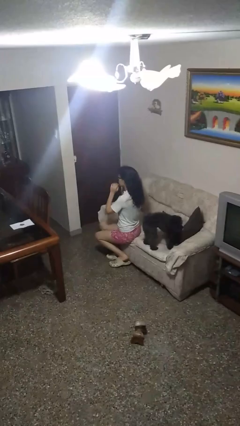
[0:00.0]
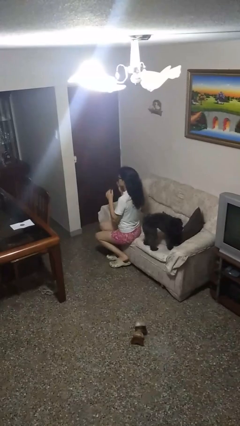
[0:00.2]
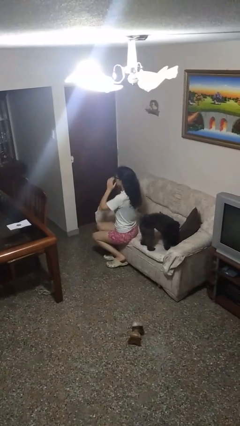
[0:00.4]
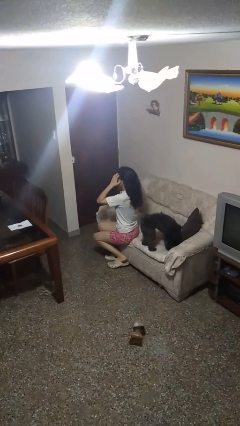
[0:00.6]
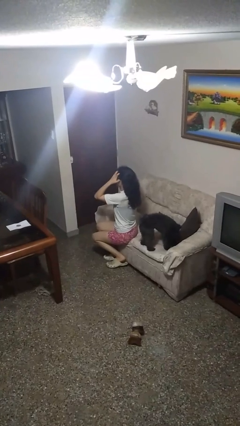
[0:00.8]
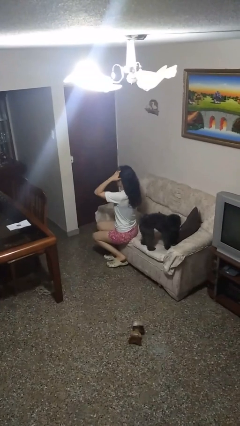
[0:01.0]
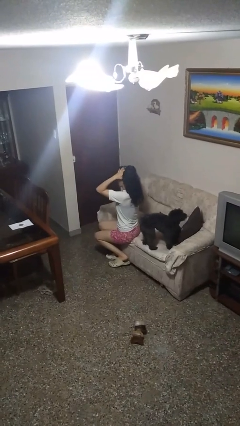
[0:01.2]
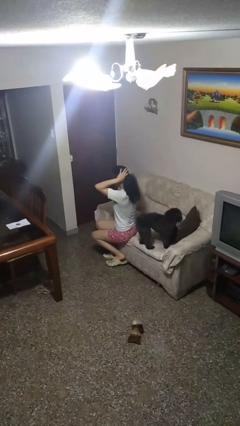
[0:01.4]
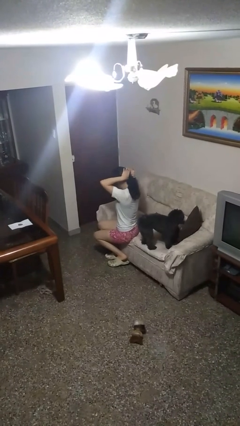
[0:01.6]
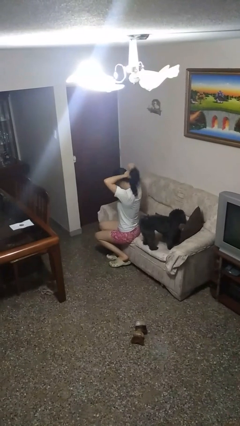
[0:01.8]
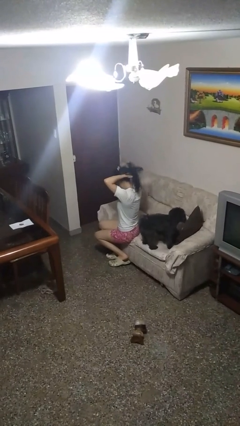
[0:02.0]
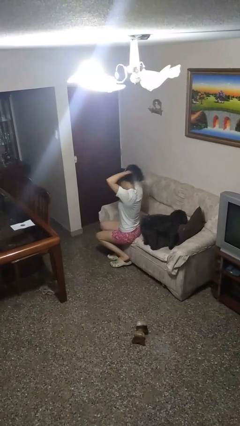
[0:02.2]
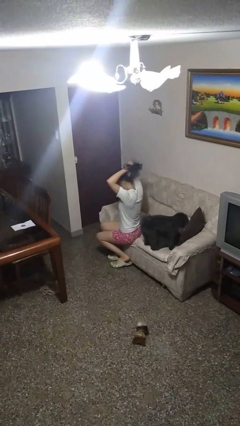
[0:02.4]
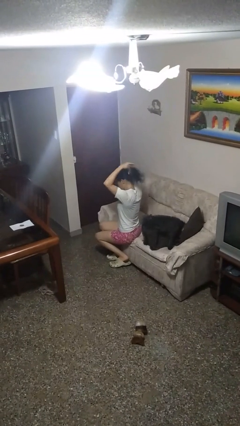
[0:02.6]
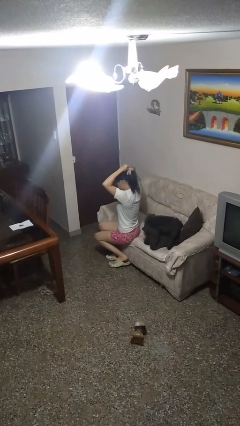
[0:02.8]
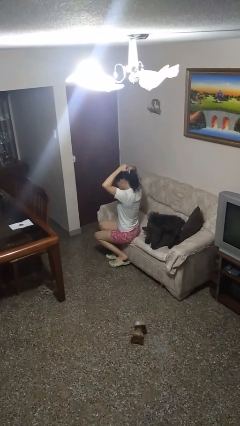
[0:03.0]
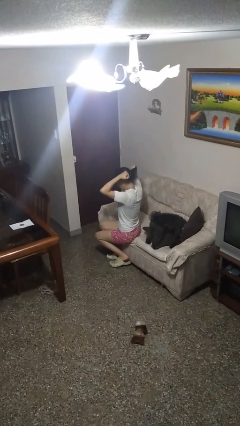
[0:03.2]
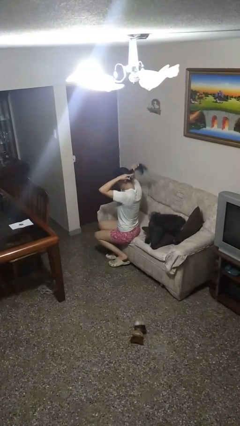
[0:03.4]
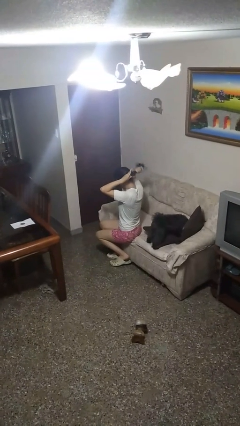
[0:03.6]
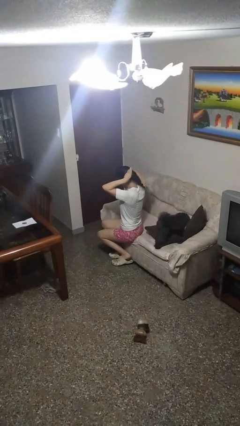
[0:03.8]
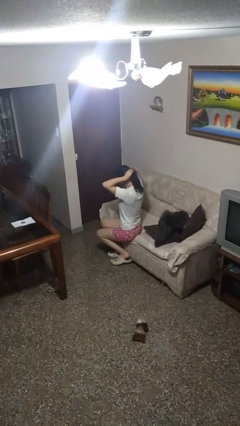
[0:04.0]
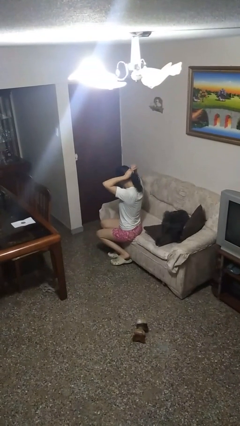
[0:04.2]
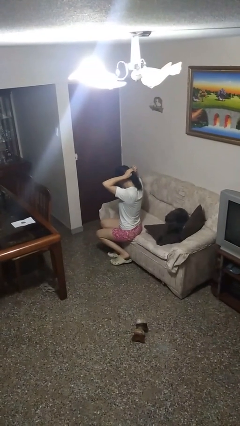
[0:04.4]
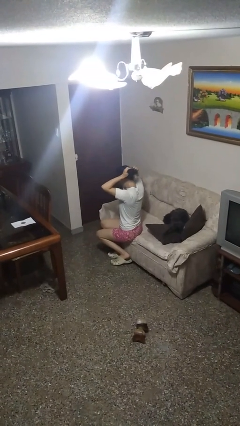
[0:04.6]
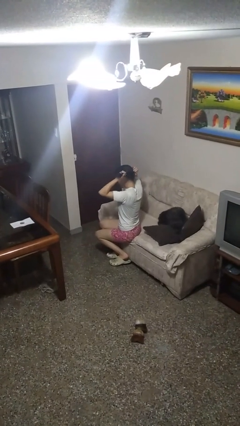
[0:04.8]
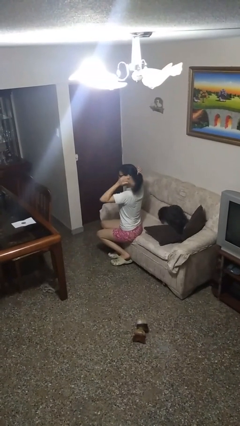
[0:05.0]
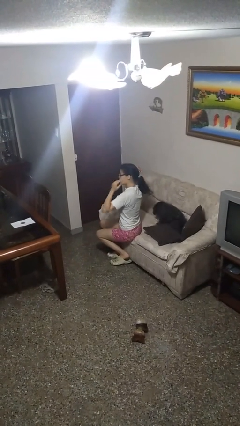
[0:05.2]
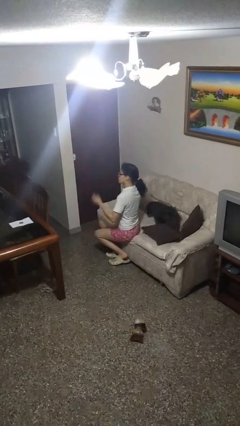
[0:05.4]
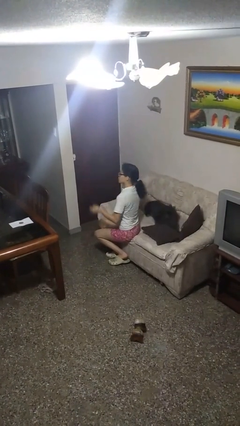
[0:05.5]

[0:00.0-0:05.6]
person puts hair in ponytail

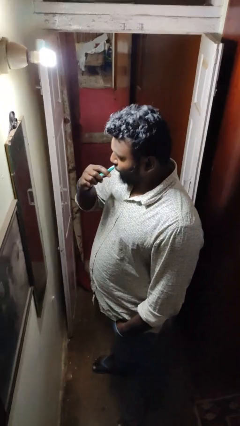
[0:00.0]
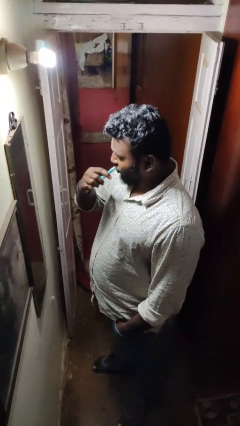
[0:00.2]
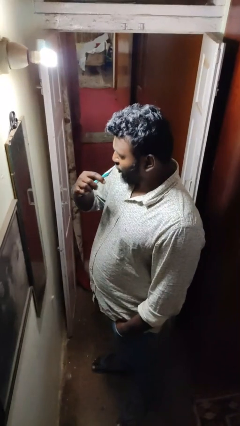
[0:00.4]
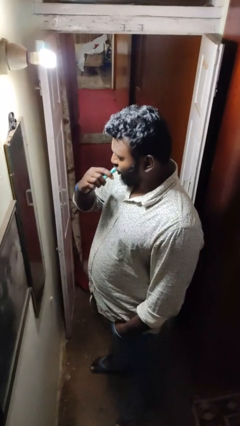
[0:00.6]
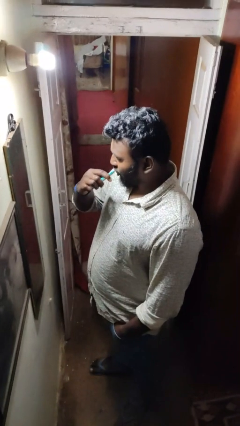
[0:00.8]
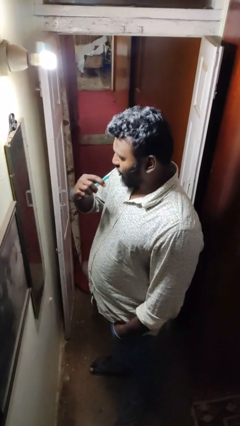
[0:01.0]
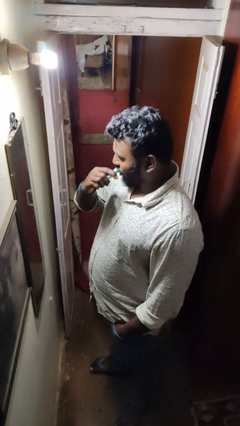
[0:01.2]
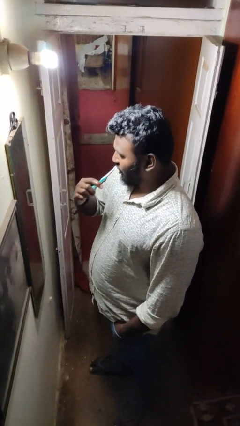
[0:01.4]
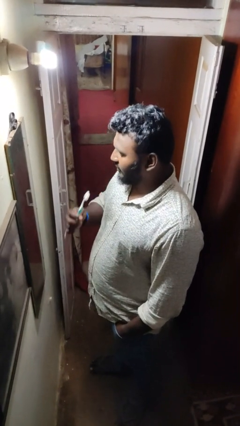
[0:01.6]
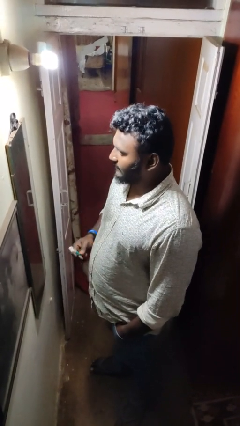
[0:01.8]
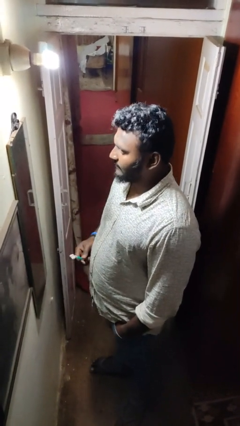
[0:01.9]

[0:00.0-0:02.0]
person brushes teeth

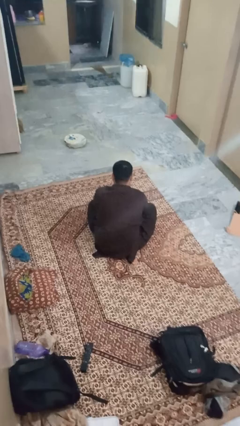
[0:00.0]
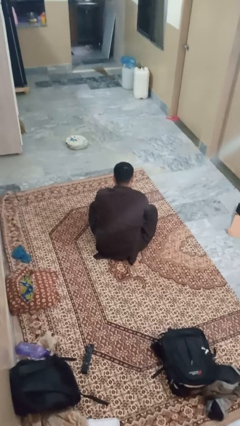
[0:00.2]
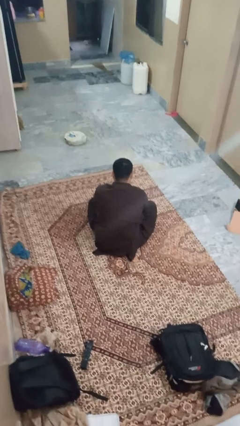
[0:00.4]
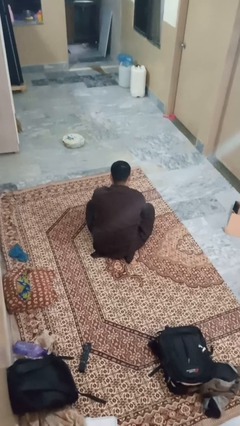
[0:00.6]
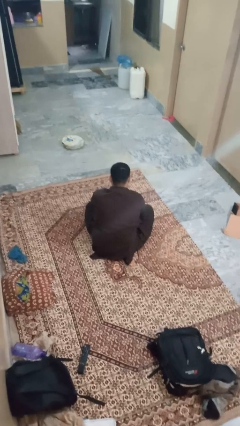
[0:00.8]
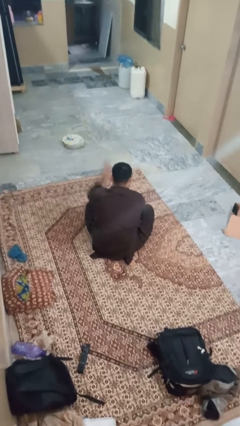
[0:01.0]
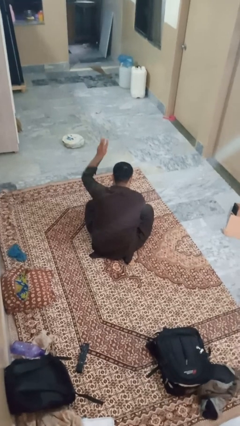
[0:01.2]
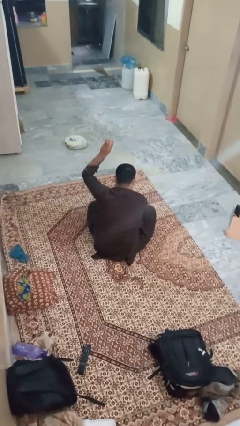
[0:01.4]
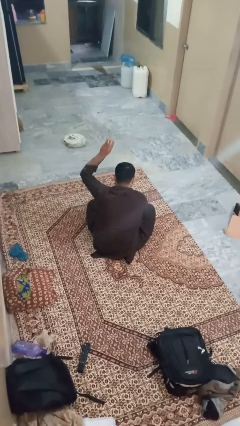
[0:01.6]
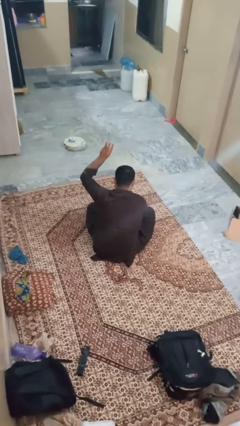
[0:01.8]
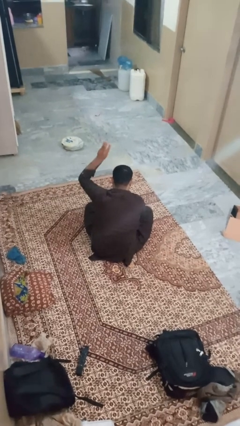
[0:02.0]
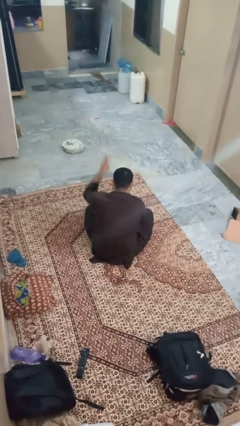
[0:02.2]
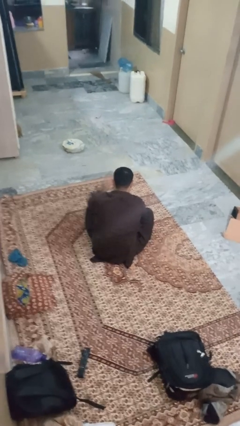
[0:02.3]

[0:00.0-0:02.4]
person gestures number three

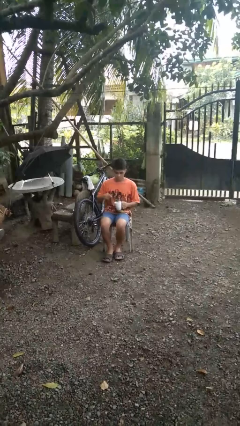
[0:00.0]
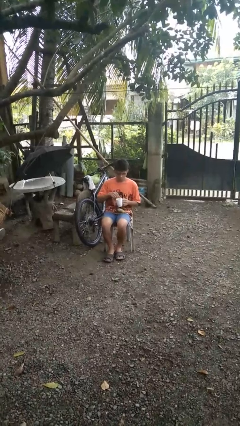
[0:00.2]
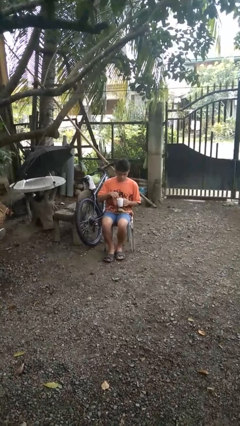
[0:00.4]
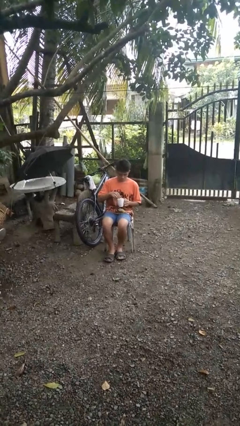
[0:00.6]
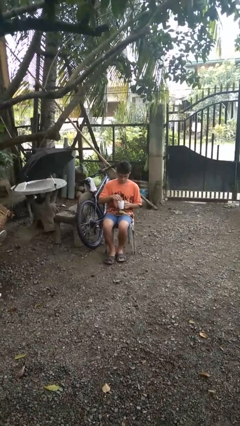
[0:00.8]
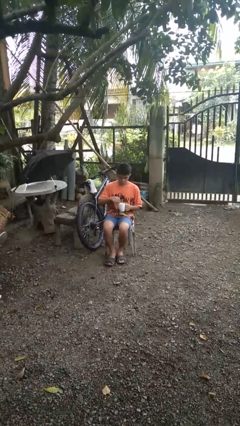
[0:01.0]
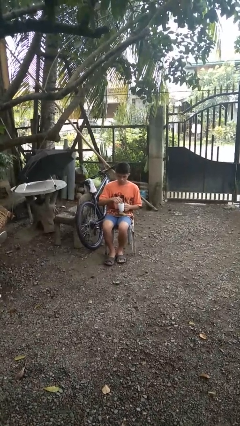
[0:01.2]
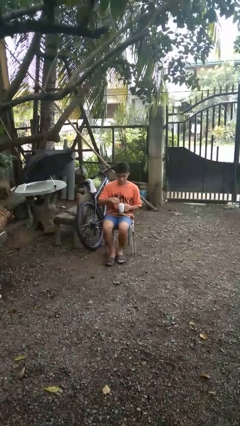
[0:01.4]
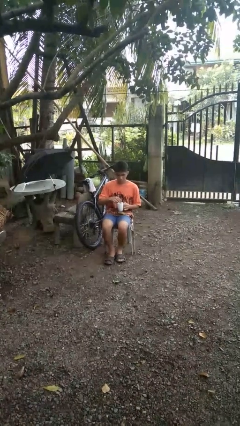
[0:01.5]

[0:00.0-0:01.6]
person stirs mug

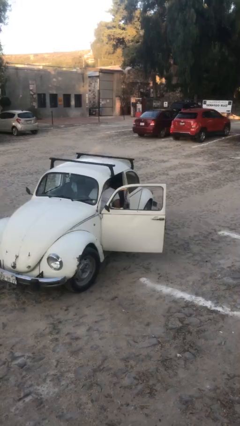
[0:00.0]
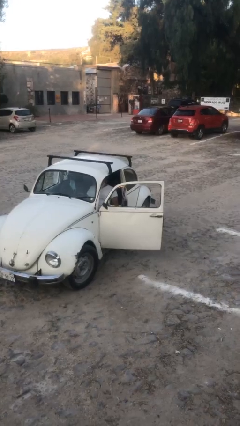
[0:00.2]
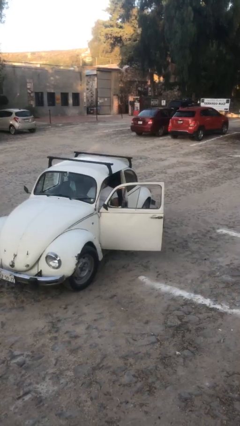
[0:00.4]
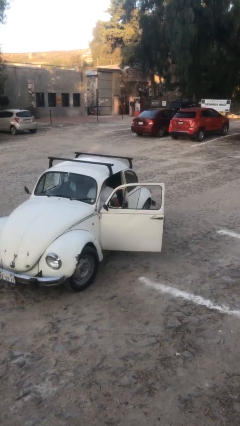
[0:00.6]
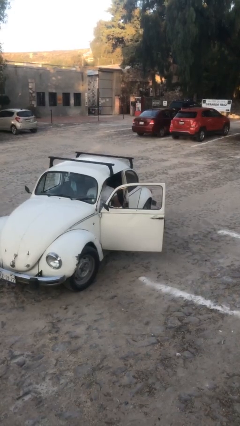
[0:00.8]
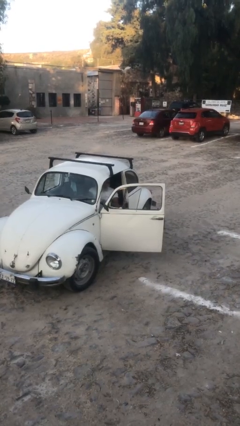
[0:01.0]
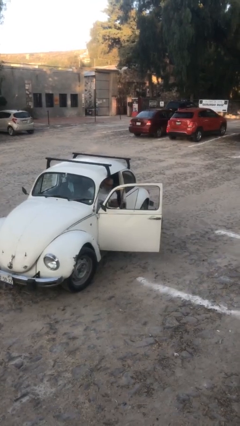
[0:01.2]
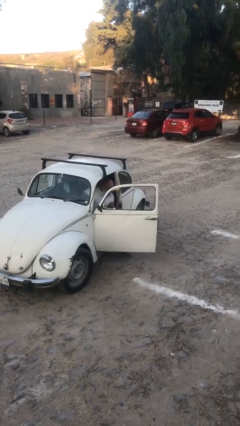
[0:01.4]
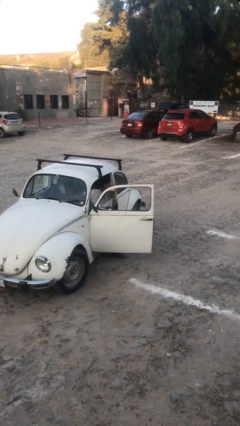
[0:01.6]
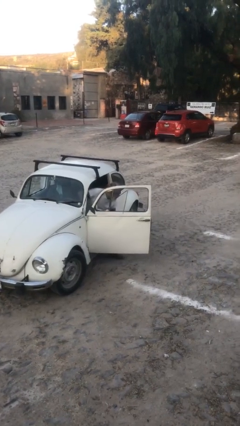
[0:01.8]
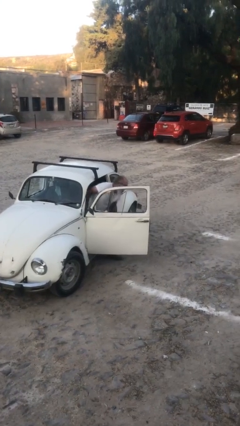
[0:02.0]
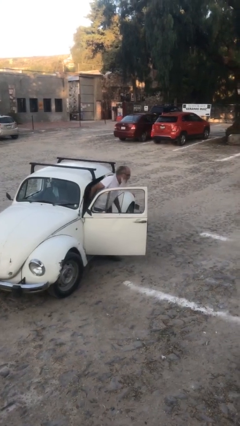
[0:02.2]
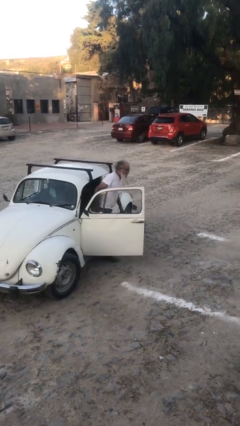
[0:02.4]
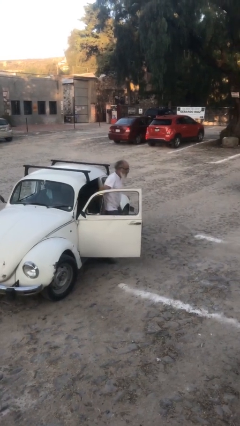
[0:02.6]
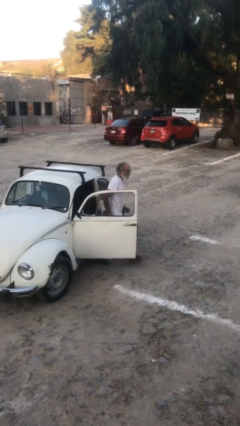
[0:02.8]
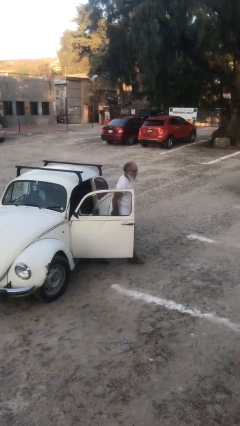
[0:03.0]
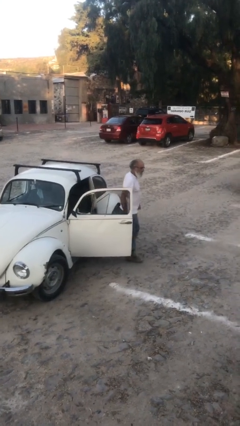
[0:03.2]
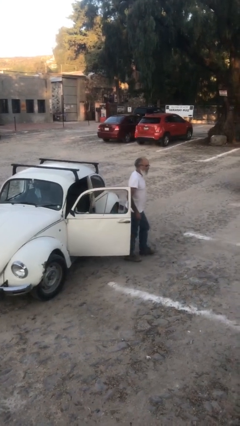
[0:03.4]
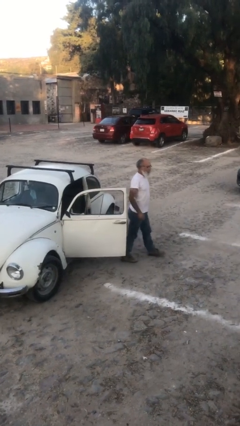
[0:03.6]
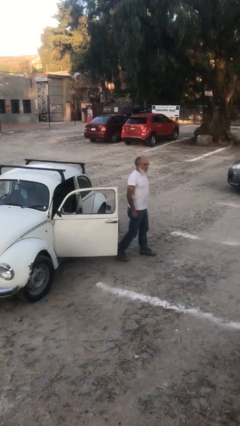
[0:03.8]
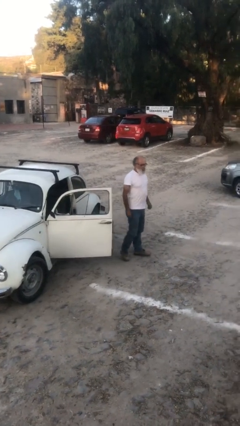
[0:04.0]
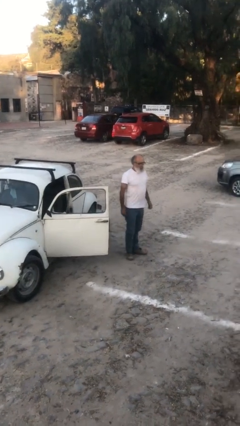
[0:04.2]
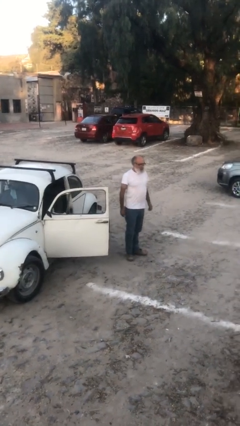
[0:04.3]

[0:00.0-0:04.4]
person exits car

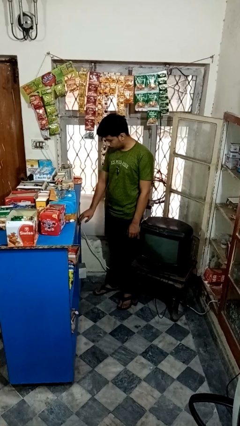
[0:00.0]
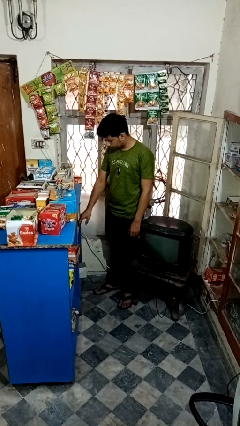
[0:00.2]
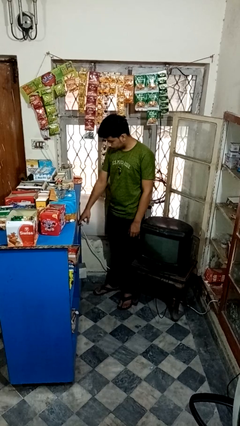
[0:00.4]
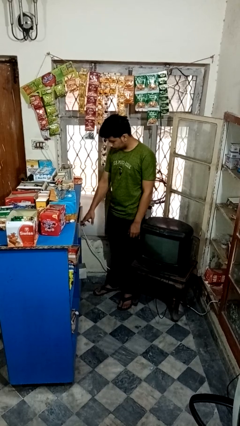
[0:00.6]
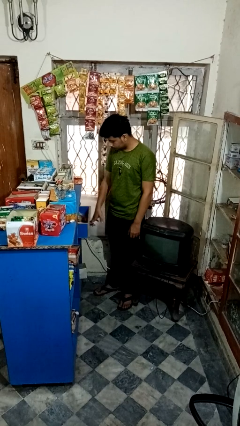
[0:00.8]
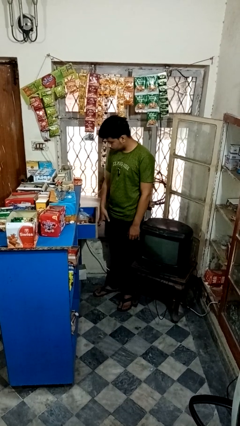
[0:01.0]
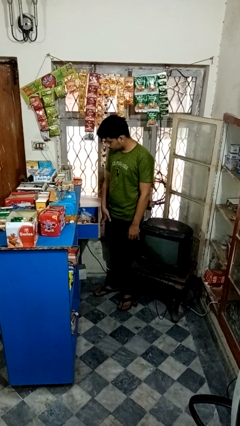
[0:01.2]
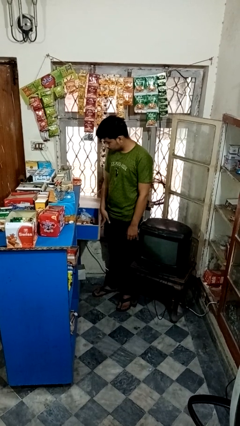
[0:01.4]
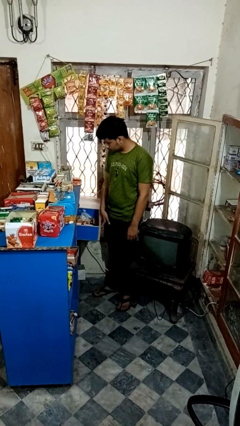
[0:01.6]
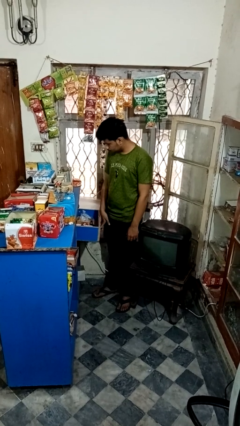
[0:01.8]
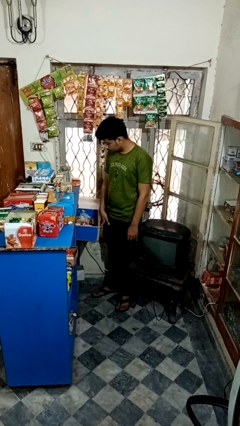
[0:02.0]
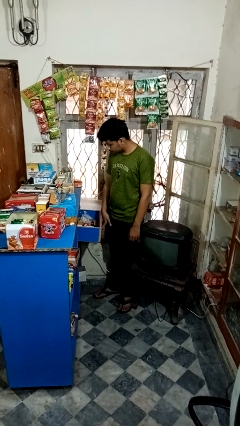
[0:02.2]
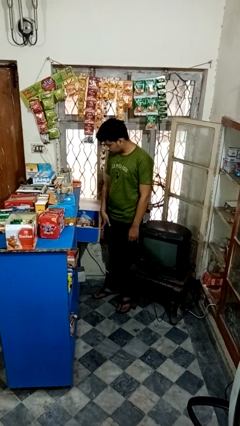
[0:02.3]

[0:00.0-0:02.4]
person opens kitchen drawer
